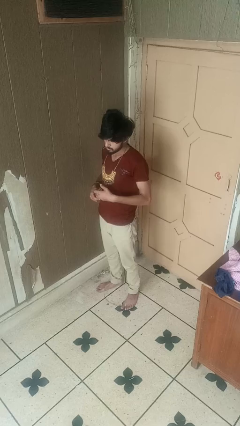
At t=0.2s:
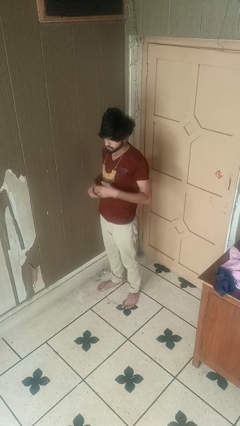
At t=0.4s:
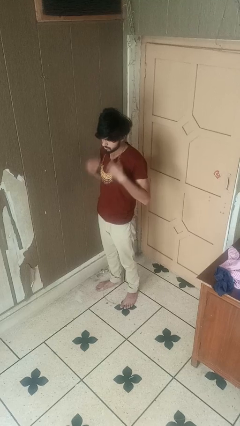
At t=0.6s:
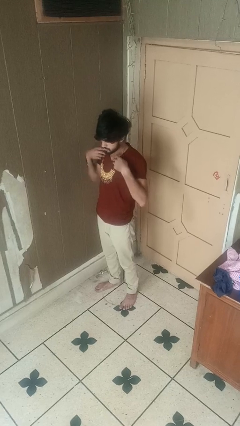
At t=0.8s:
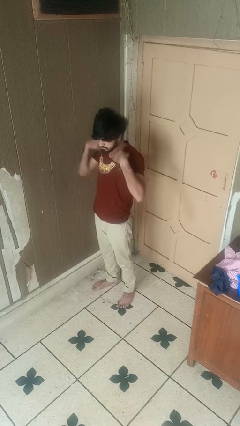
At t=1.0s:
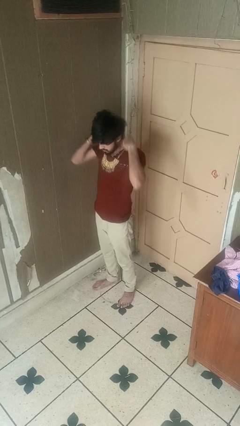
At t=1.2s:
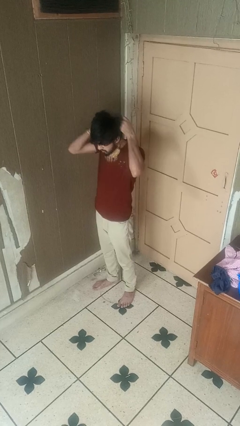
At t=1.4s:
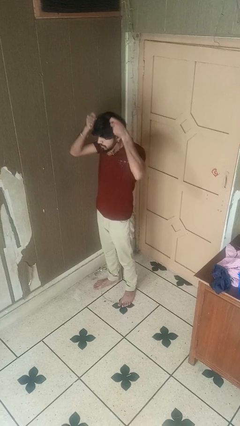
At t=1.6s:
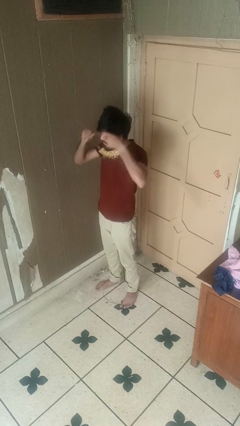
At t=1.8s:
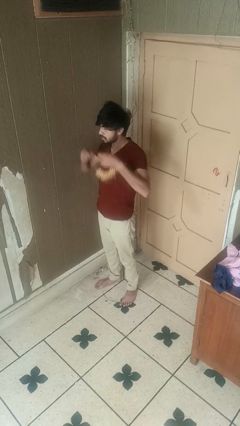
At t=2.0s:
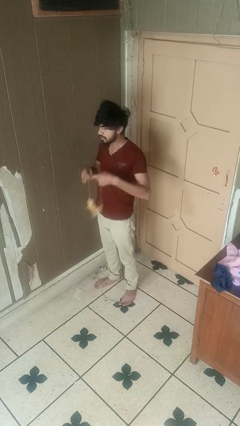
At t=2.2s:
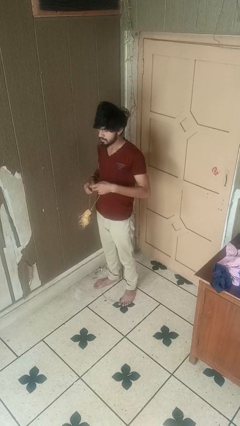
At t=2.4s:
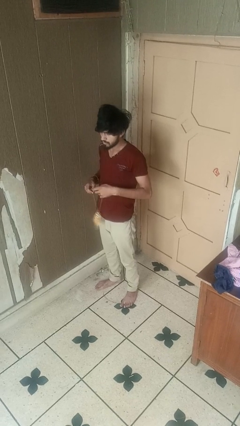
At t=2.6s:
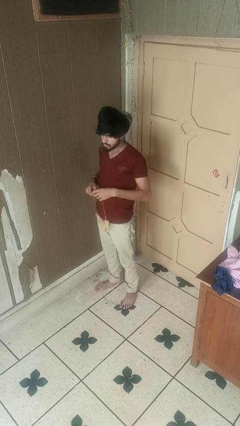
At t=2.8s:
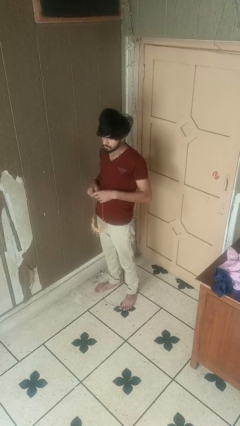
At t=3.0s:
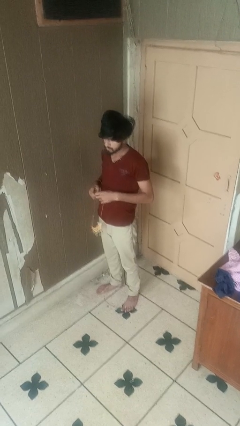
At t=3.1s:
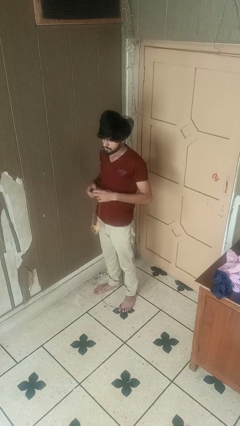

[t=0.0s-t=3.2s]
person takes off necklace

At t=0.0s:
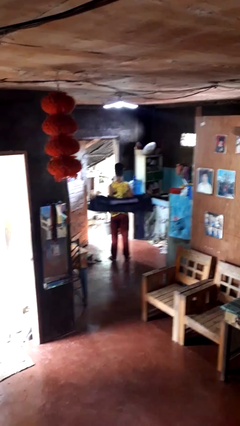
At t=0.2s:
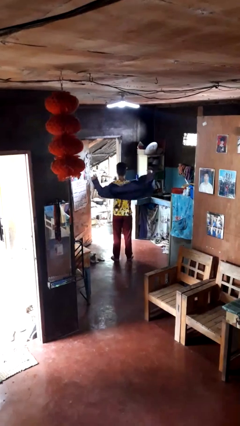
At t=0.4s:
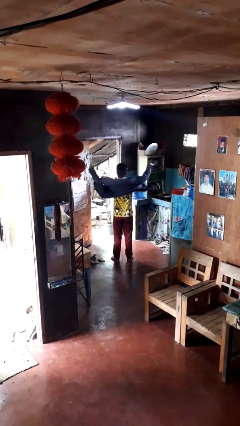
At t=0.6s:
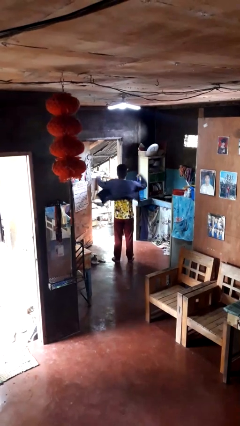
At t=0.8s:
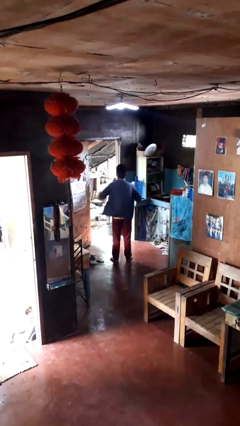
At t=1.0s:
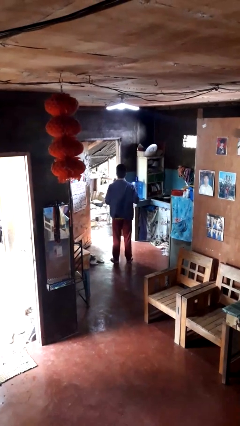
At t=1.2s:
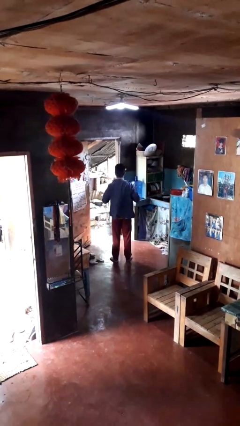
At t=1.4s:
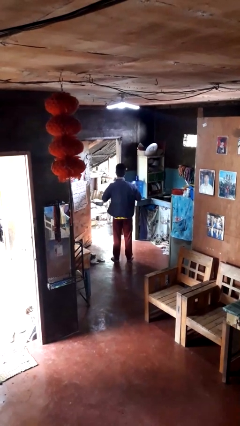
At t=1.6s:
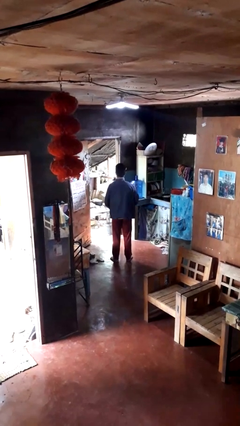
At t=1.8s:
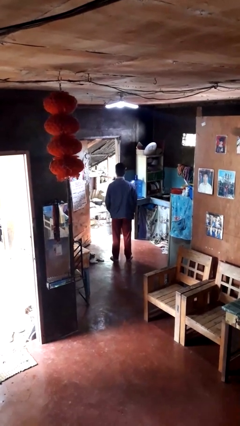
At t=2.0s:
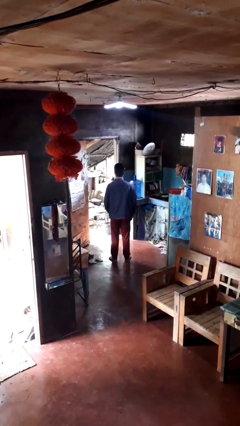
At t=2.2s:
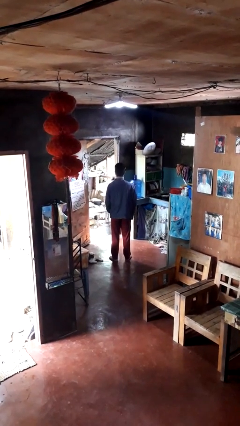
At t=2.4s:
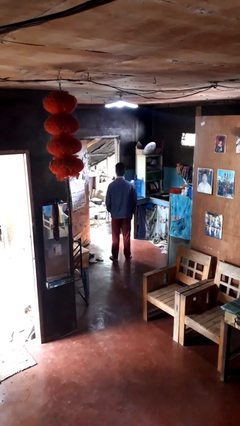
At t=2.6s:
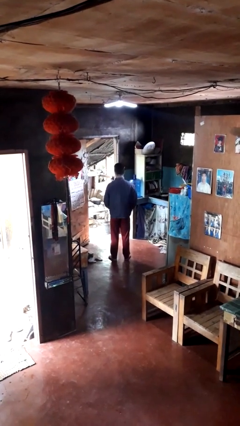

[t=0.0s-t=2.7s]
person puts on jacket

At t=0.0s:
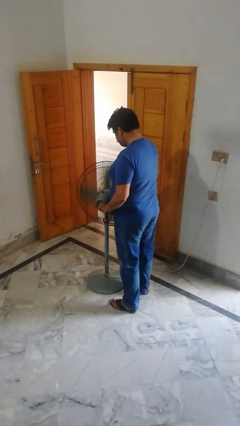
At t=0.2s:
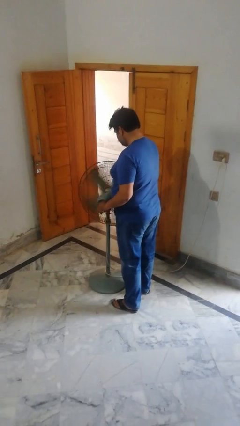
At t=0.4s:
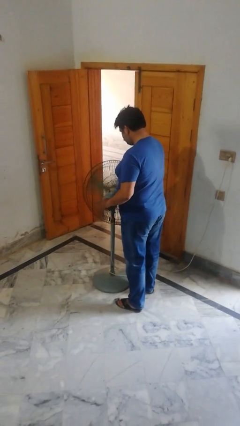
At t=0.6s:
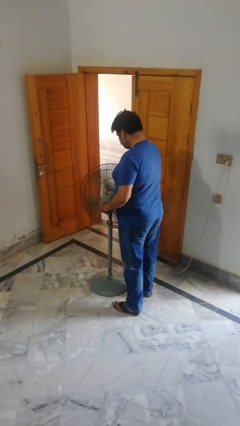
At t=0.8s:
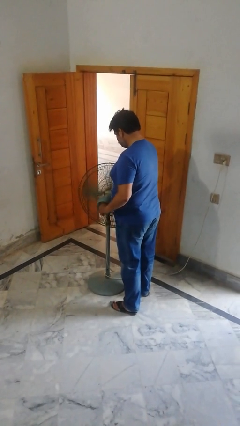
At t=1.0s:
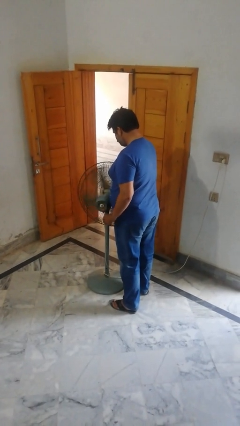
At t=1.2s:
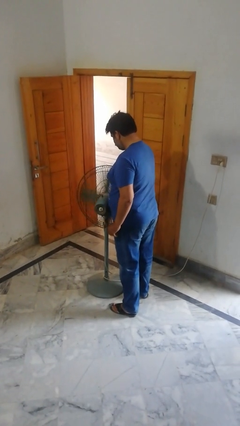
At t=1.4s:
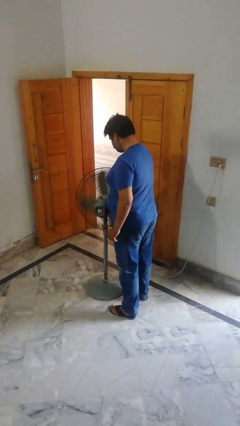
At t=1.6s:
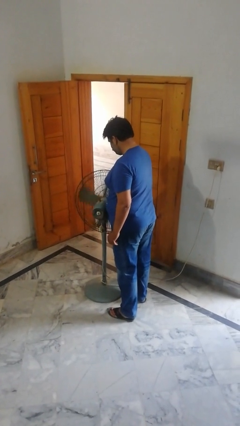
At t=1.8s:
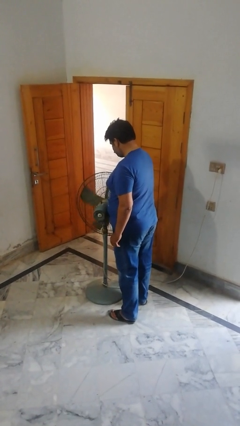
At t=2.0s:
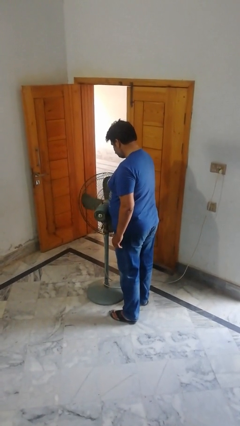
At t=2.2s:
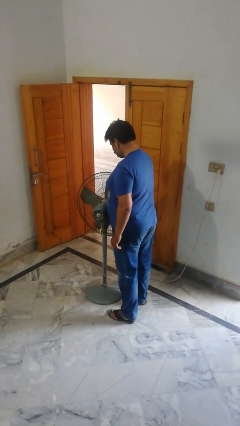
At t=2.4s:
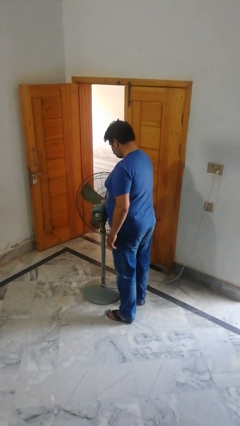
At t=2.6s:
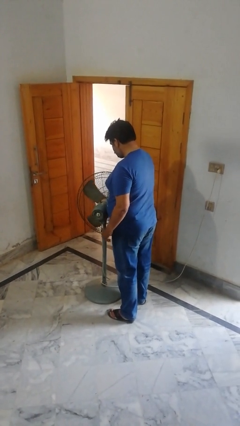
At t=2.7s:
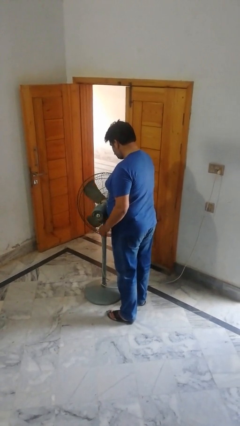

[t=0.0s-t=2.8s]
person turns off fan

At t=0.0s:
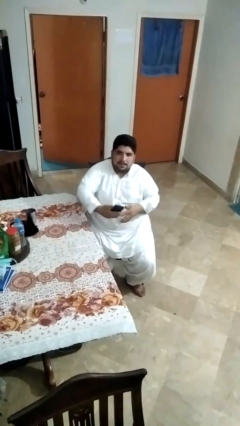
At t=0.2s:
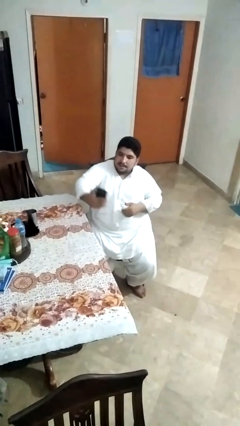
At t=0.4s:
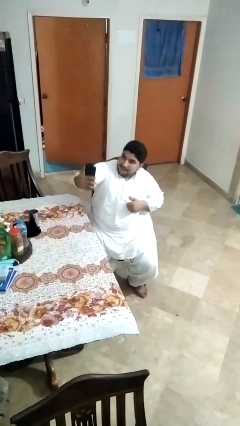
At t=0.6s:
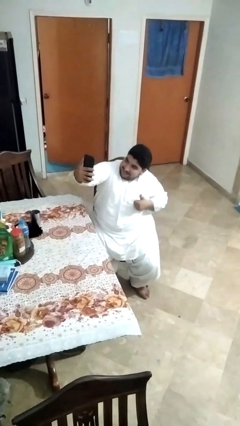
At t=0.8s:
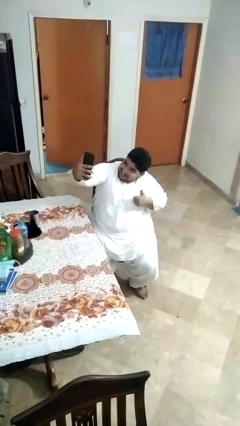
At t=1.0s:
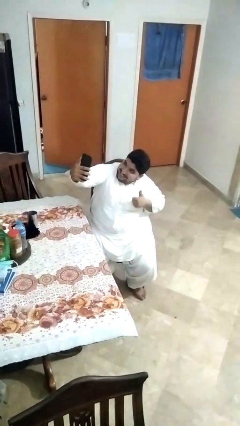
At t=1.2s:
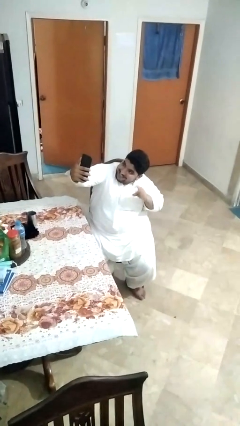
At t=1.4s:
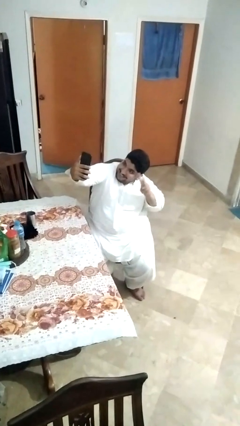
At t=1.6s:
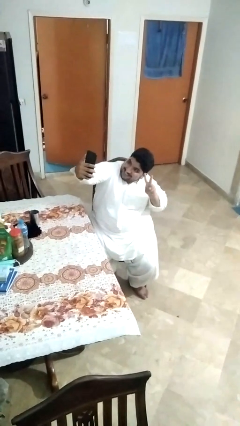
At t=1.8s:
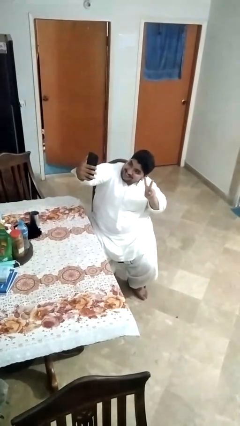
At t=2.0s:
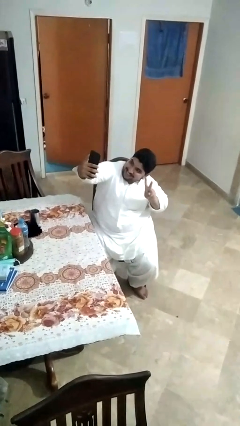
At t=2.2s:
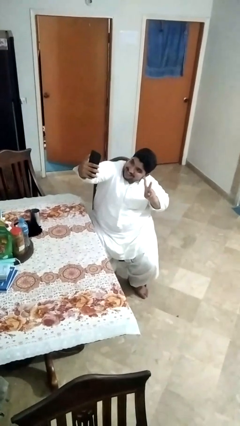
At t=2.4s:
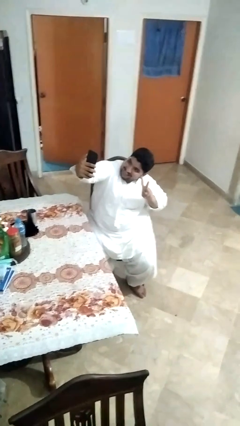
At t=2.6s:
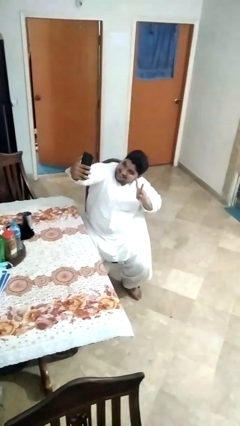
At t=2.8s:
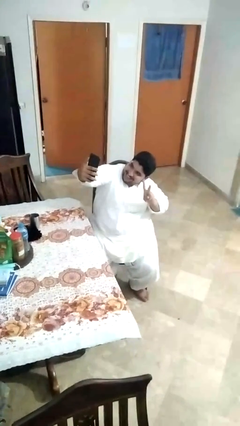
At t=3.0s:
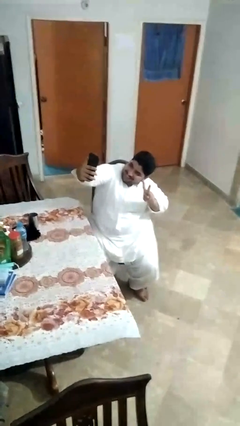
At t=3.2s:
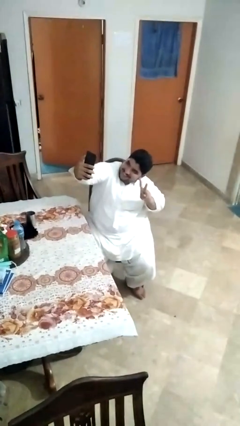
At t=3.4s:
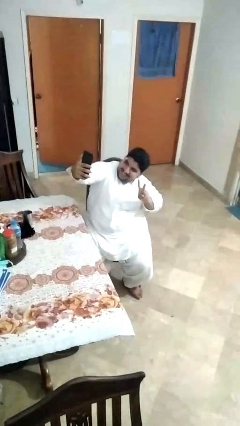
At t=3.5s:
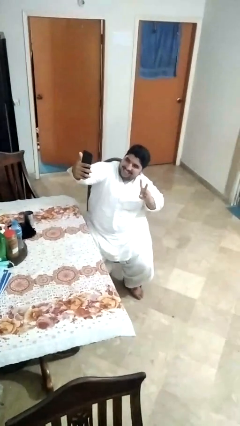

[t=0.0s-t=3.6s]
person takes selfie

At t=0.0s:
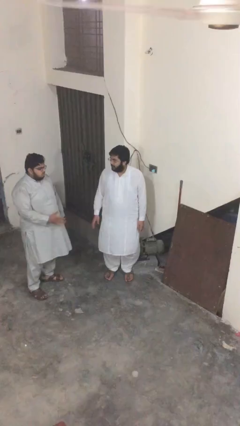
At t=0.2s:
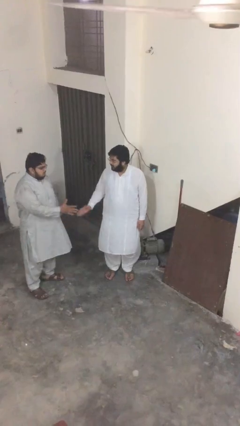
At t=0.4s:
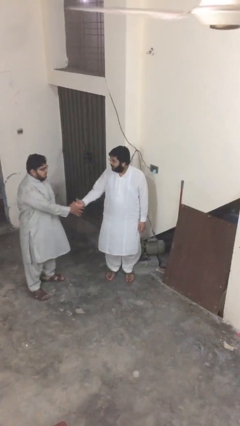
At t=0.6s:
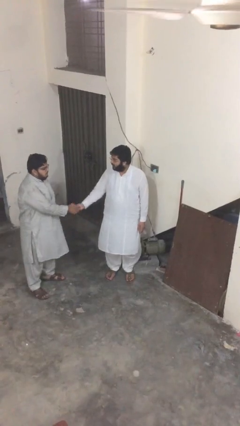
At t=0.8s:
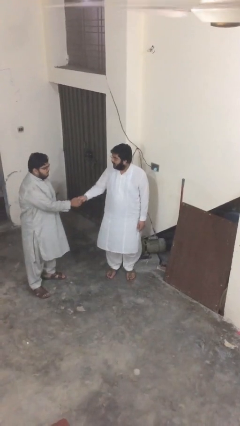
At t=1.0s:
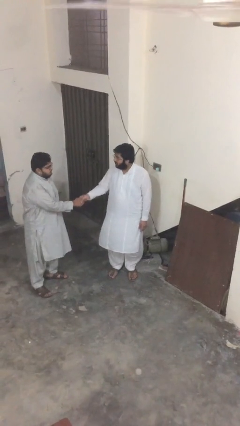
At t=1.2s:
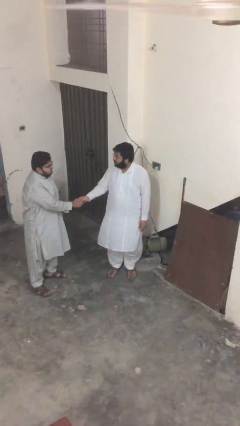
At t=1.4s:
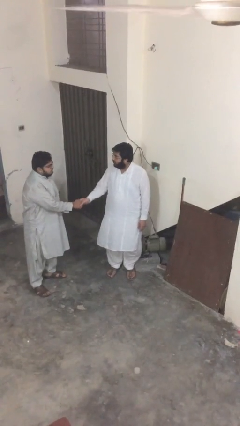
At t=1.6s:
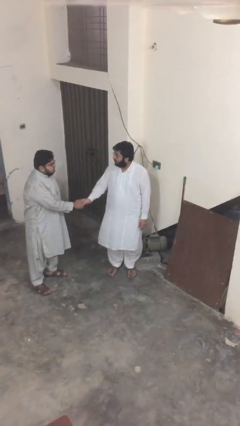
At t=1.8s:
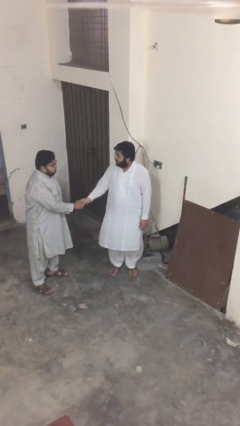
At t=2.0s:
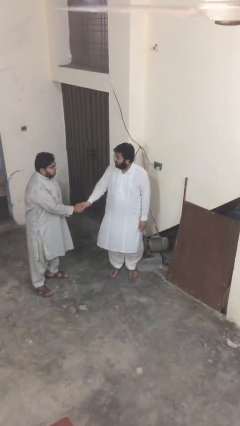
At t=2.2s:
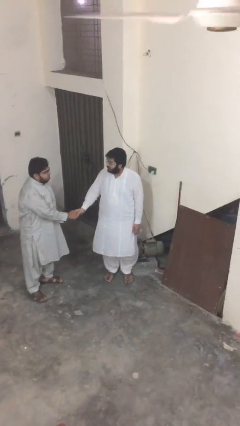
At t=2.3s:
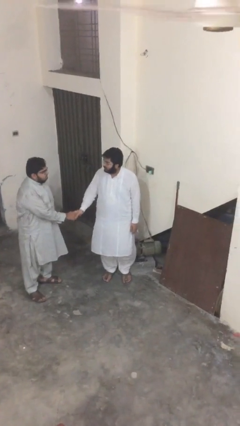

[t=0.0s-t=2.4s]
person shakes hand

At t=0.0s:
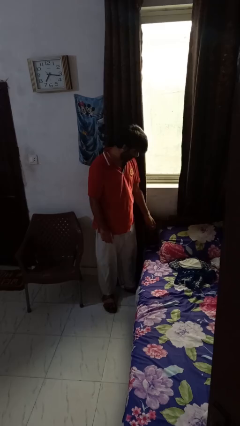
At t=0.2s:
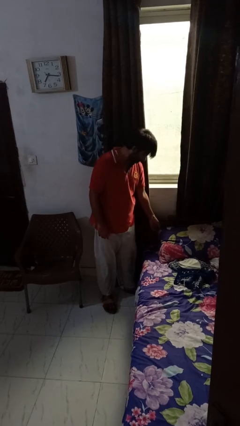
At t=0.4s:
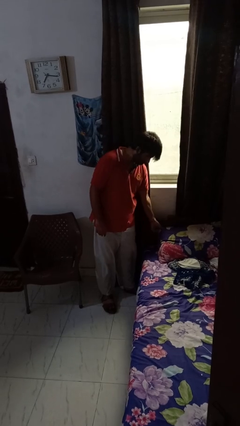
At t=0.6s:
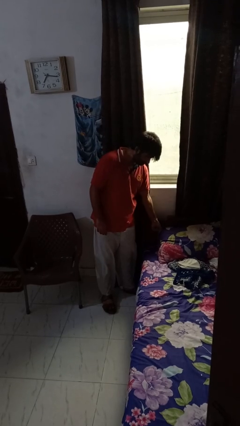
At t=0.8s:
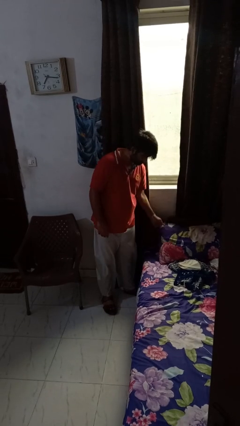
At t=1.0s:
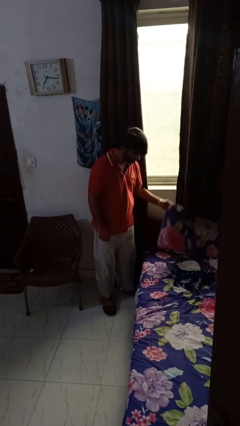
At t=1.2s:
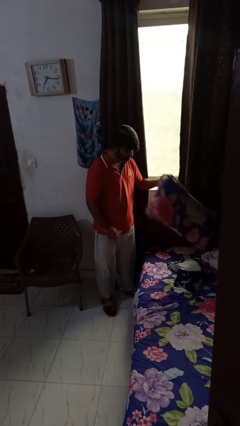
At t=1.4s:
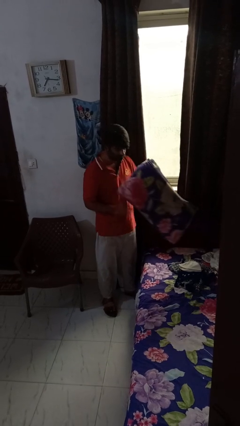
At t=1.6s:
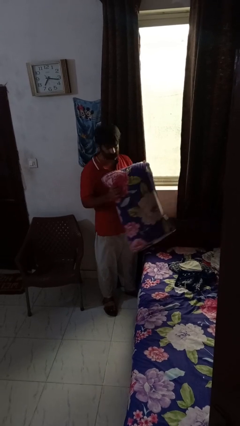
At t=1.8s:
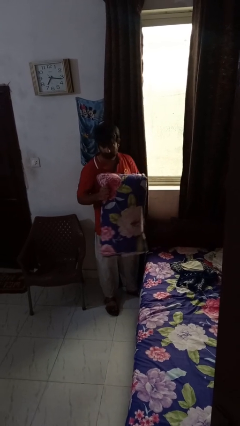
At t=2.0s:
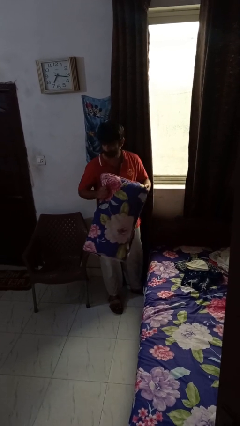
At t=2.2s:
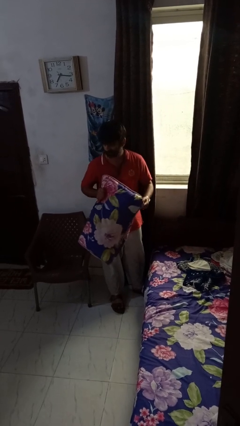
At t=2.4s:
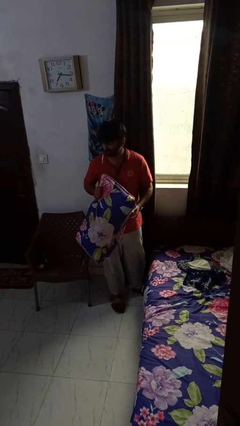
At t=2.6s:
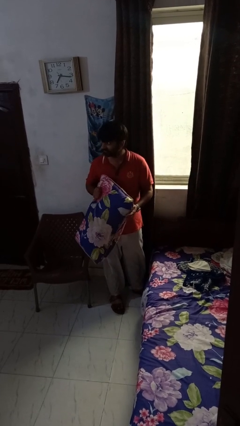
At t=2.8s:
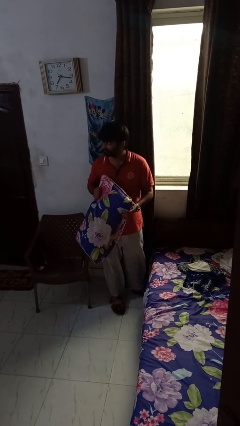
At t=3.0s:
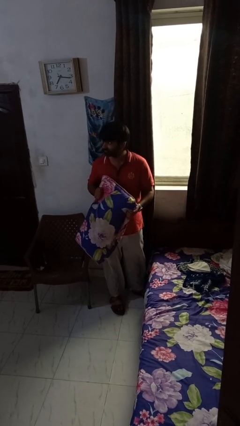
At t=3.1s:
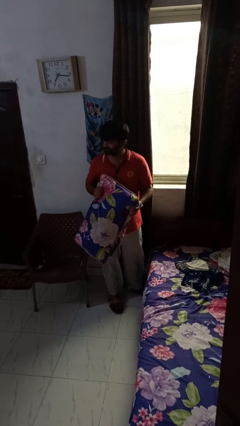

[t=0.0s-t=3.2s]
person picks up object from bed
